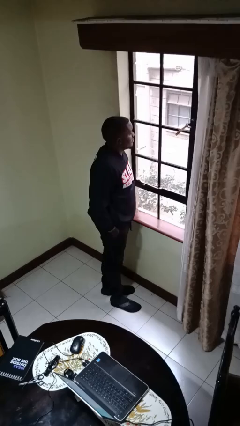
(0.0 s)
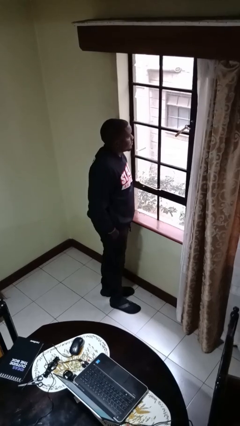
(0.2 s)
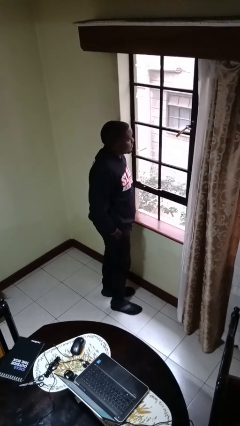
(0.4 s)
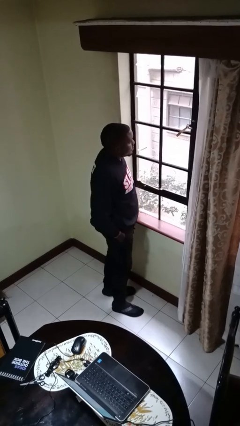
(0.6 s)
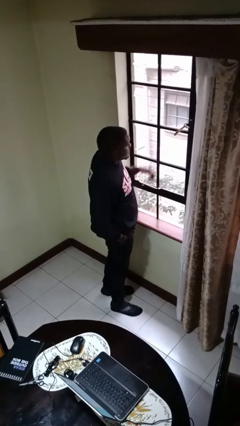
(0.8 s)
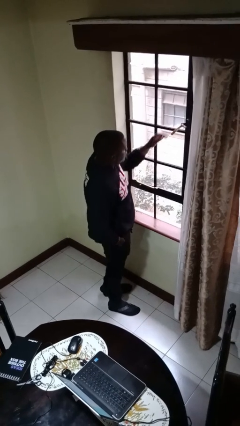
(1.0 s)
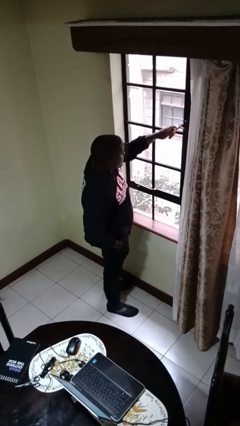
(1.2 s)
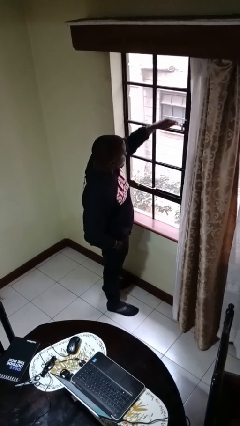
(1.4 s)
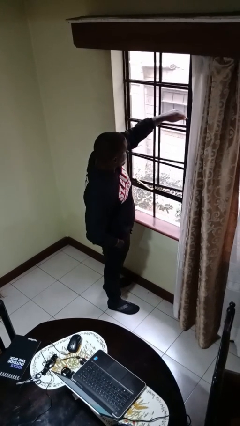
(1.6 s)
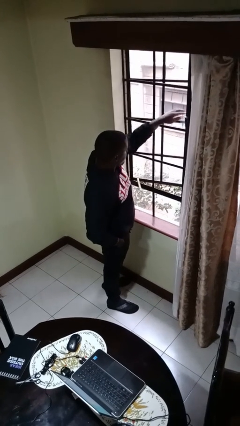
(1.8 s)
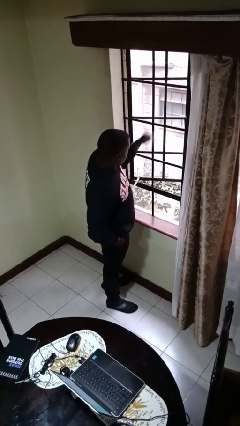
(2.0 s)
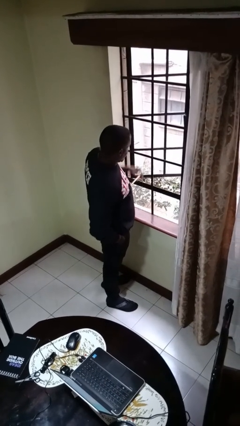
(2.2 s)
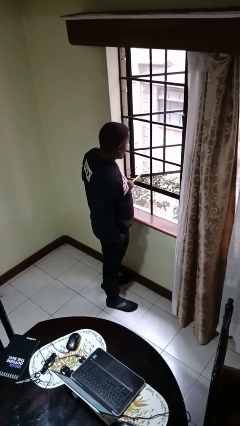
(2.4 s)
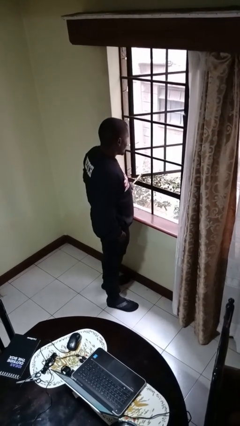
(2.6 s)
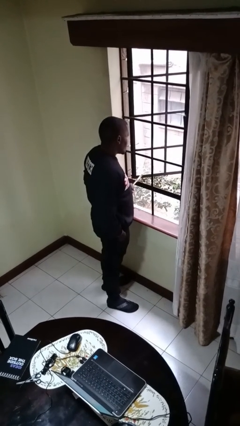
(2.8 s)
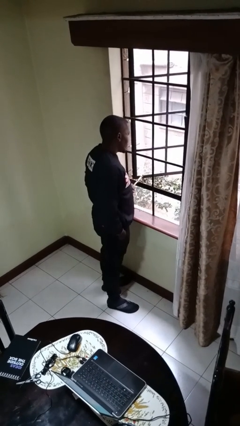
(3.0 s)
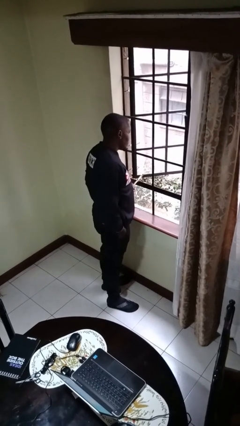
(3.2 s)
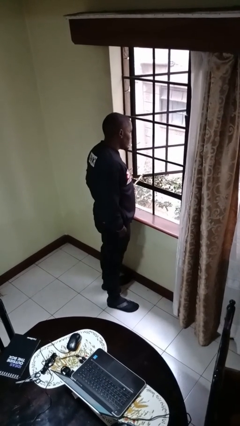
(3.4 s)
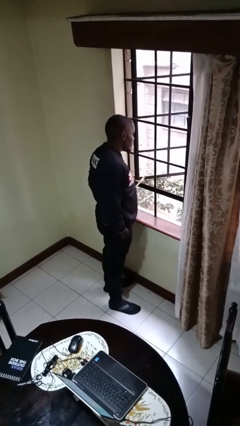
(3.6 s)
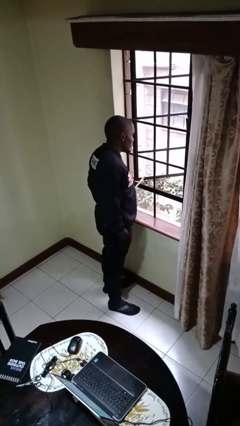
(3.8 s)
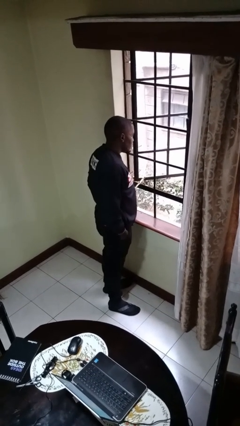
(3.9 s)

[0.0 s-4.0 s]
person opens home window

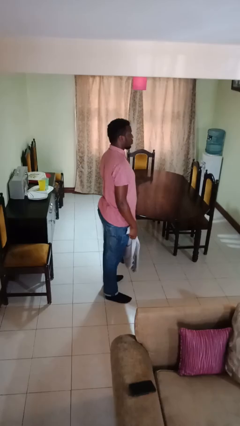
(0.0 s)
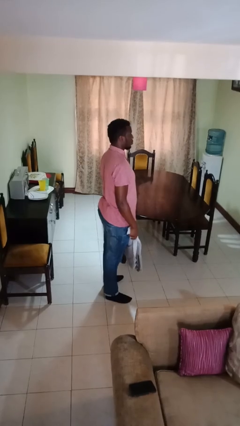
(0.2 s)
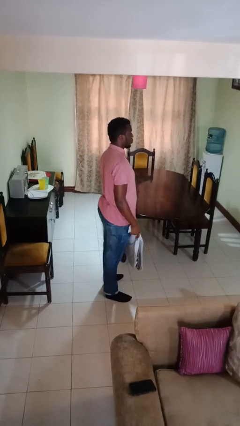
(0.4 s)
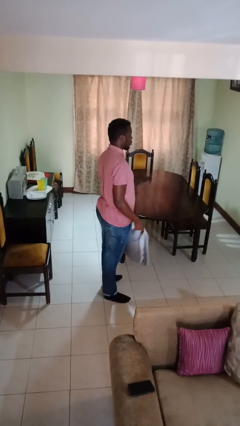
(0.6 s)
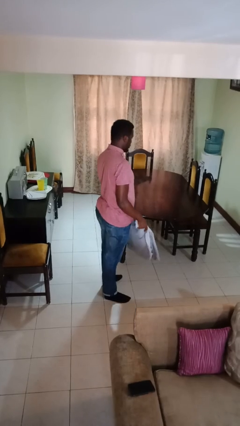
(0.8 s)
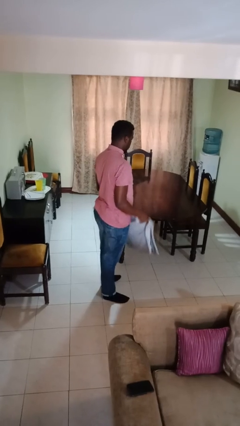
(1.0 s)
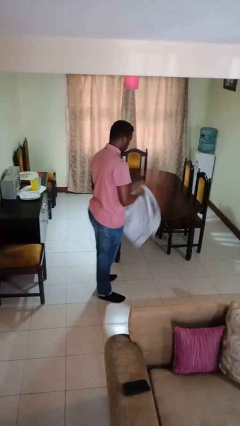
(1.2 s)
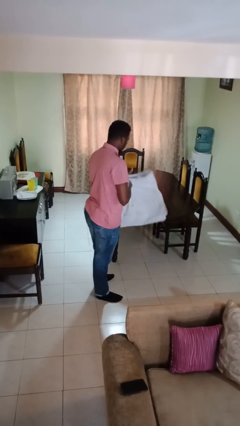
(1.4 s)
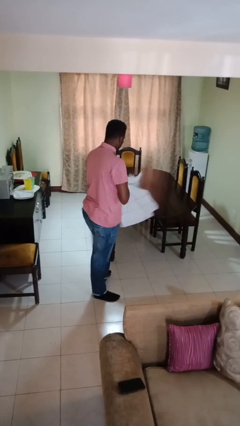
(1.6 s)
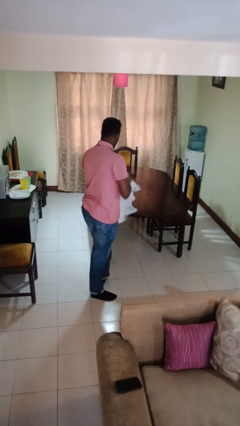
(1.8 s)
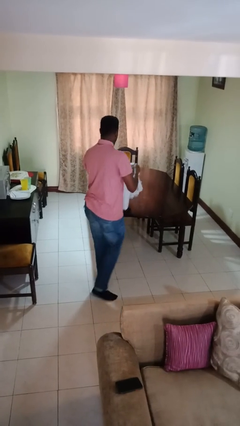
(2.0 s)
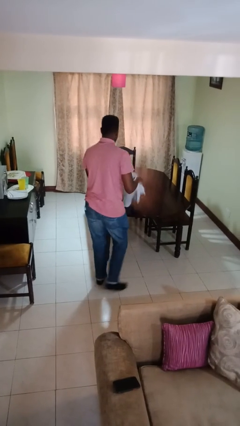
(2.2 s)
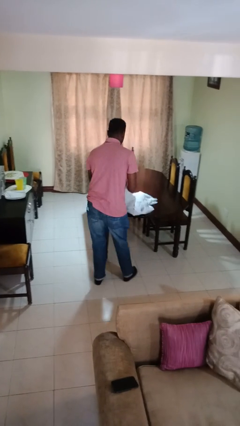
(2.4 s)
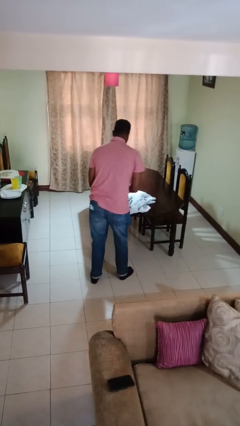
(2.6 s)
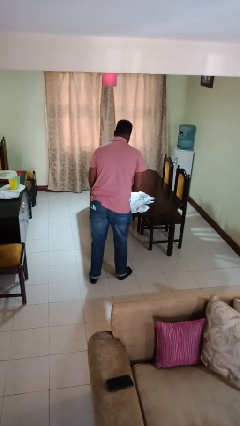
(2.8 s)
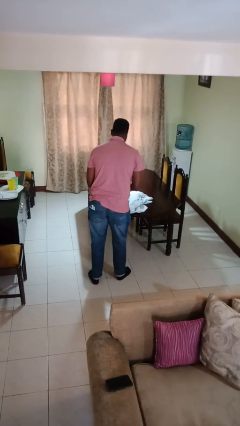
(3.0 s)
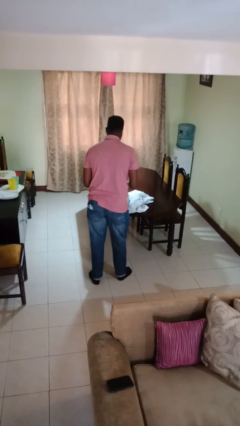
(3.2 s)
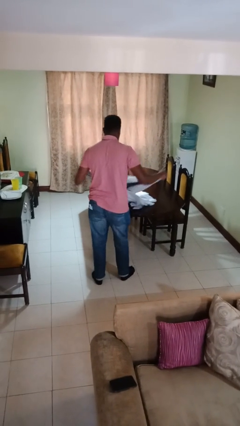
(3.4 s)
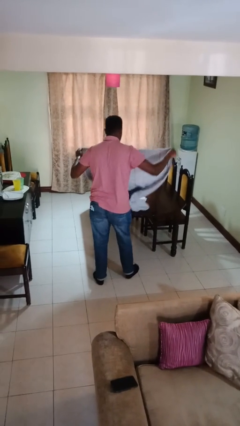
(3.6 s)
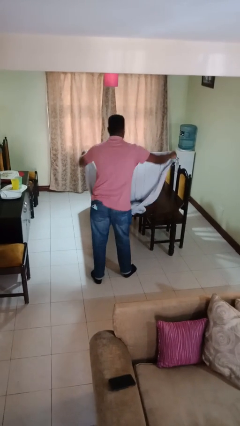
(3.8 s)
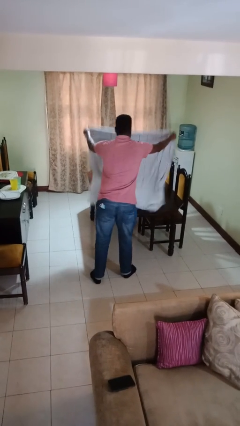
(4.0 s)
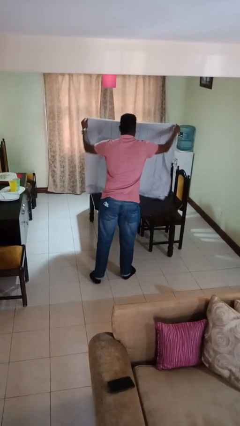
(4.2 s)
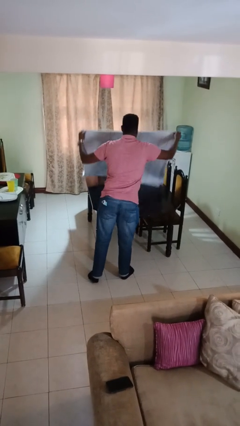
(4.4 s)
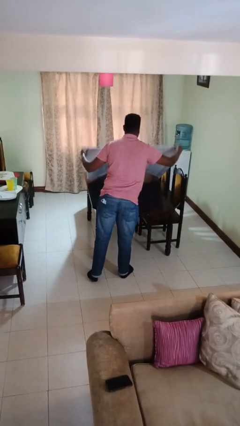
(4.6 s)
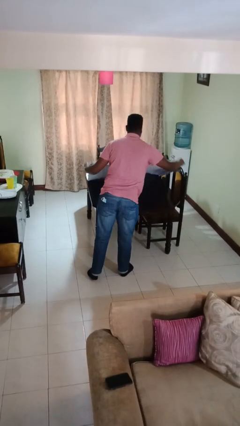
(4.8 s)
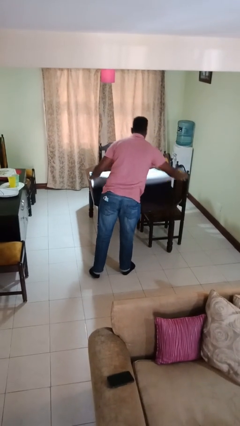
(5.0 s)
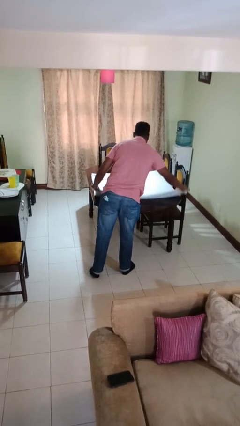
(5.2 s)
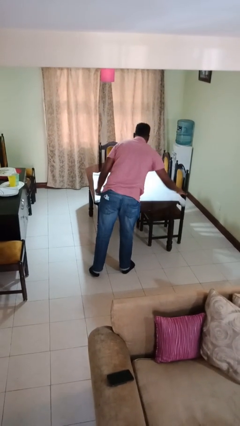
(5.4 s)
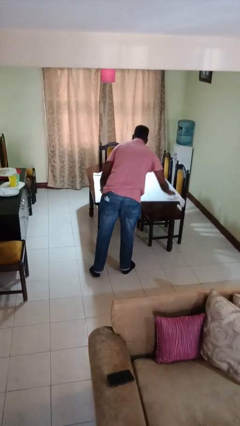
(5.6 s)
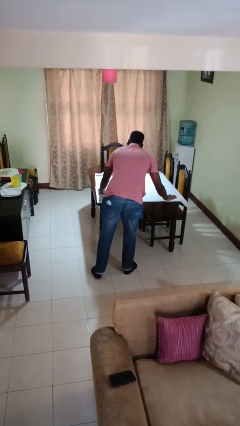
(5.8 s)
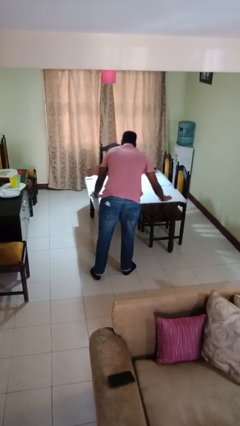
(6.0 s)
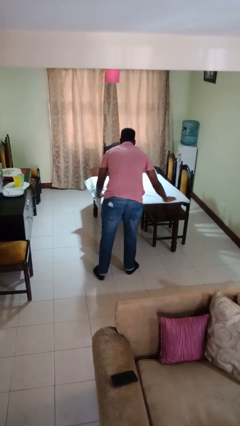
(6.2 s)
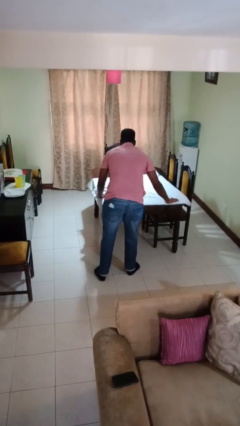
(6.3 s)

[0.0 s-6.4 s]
person spreads tablecloth

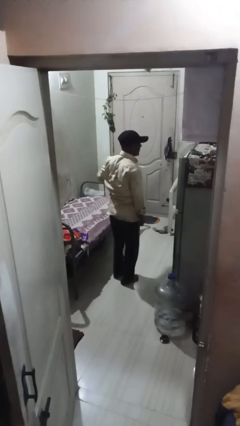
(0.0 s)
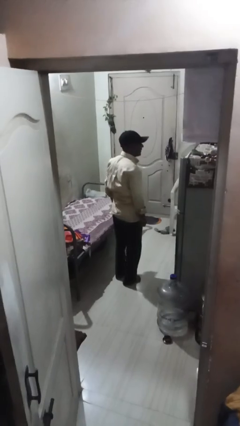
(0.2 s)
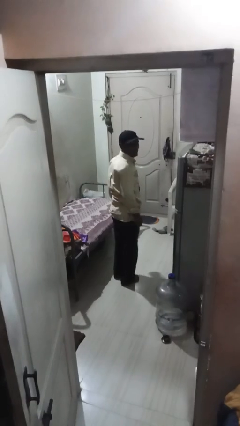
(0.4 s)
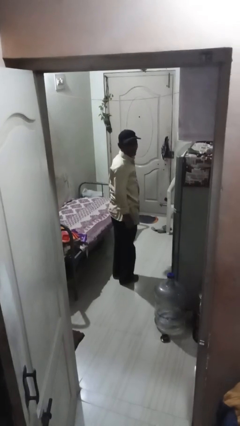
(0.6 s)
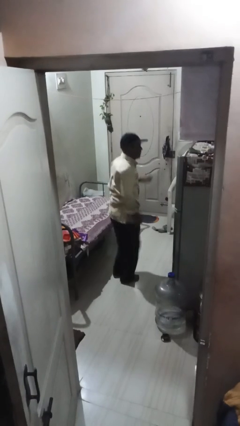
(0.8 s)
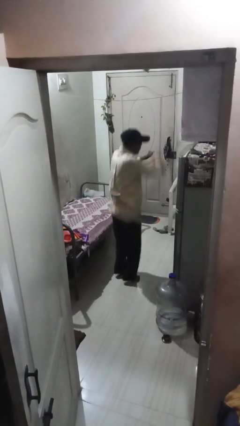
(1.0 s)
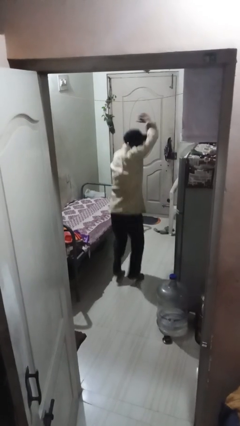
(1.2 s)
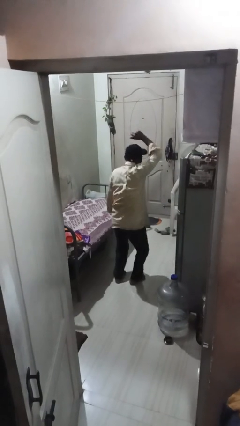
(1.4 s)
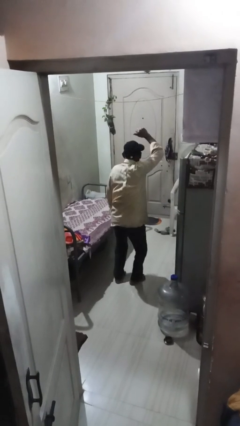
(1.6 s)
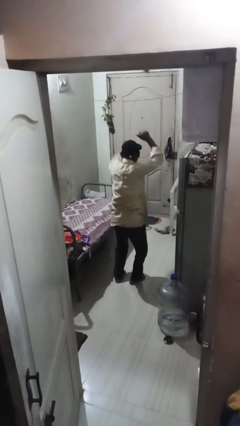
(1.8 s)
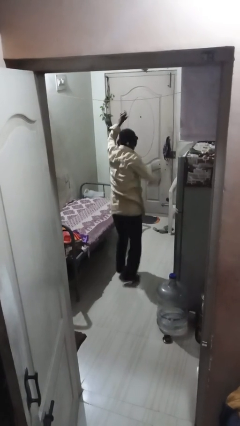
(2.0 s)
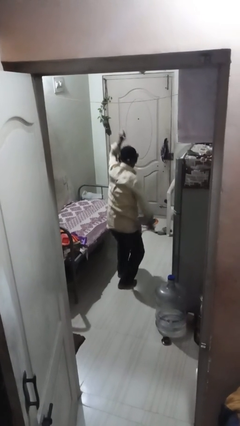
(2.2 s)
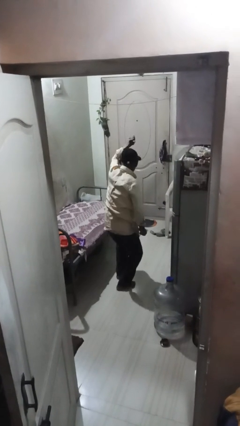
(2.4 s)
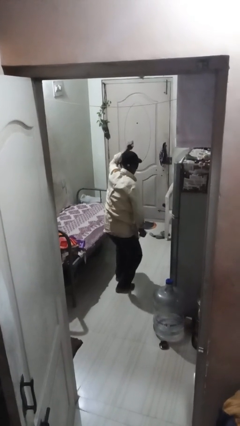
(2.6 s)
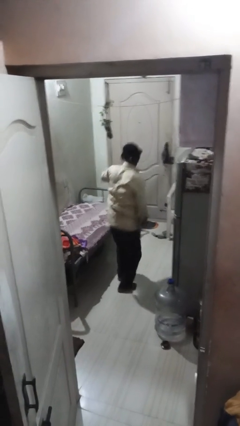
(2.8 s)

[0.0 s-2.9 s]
person dances in place

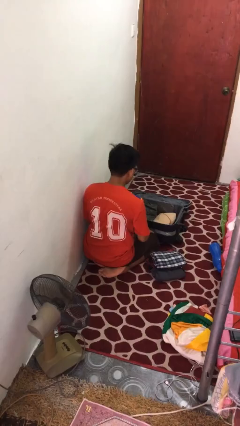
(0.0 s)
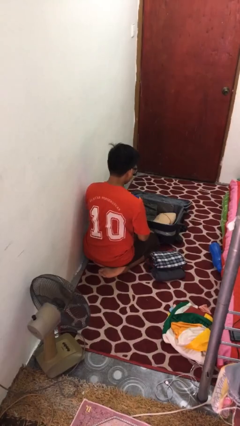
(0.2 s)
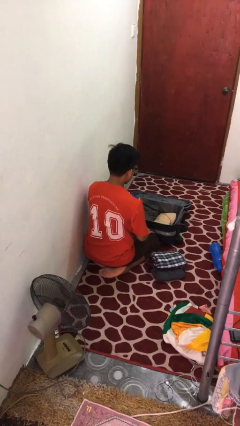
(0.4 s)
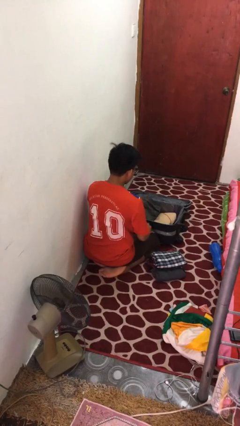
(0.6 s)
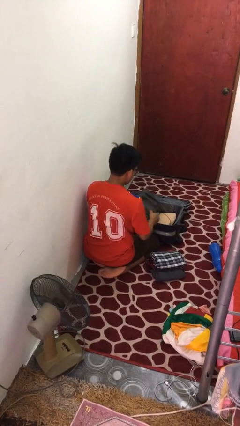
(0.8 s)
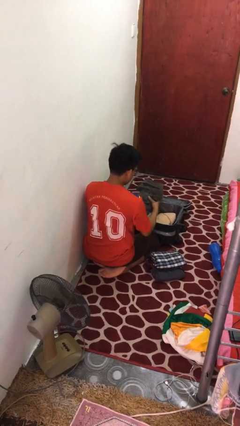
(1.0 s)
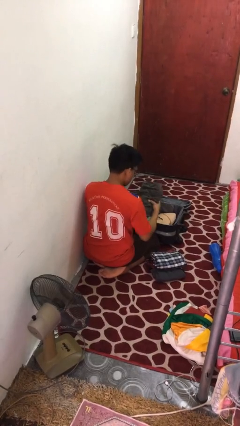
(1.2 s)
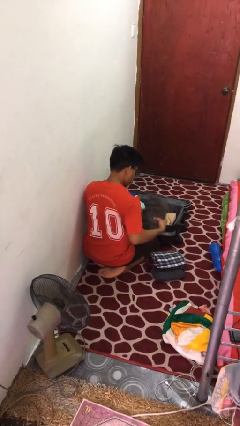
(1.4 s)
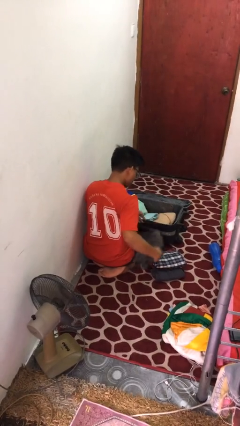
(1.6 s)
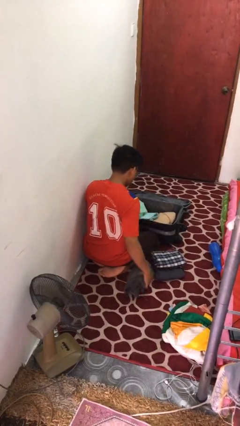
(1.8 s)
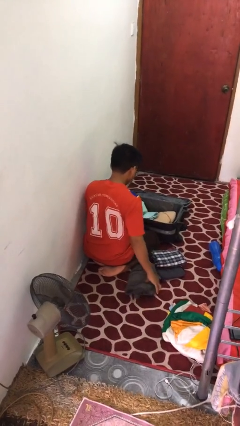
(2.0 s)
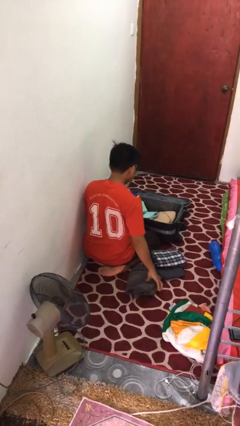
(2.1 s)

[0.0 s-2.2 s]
person unloads clothes from suitcase

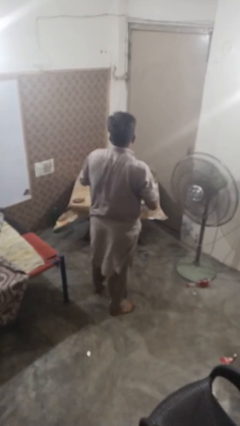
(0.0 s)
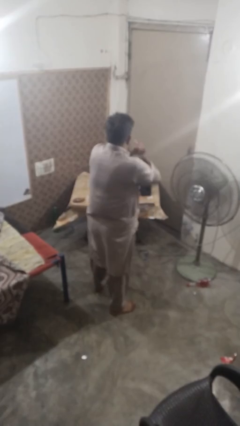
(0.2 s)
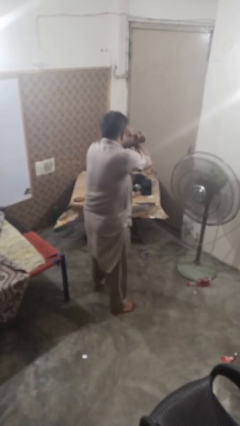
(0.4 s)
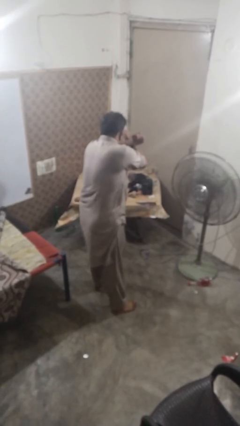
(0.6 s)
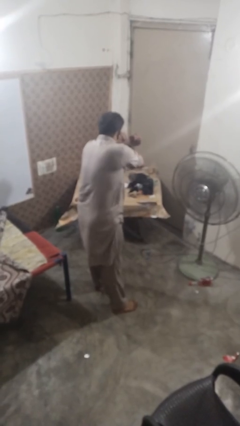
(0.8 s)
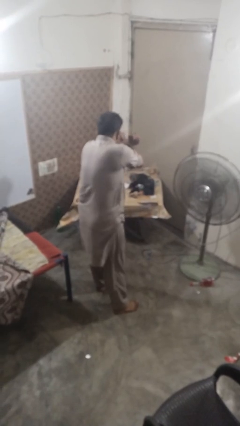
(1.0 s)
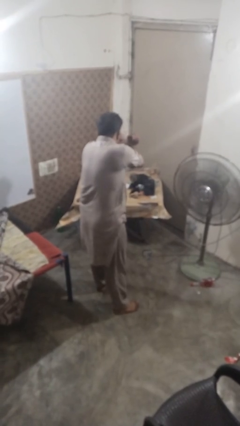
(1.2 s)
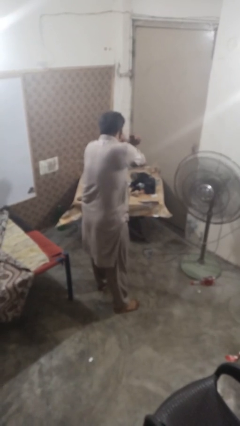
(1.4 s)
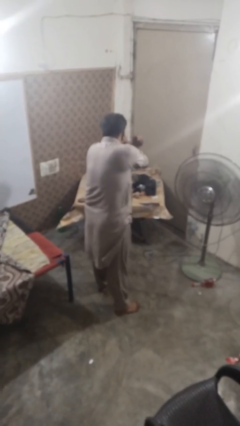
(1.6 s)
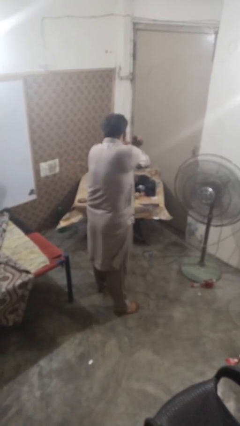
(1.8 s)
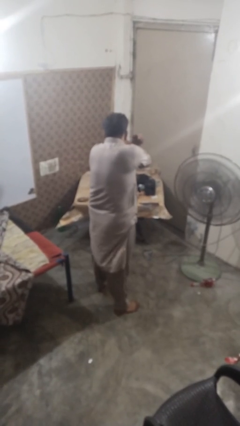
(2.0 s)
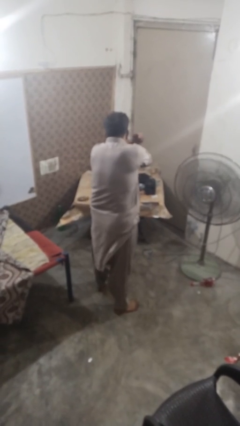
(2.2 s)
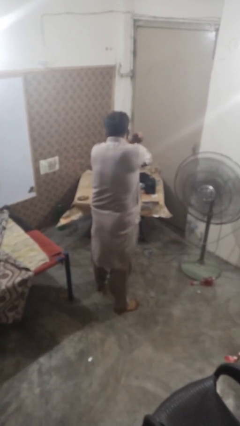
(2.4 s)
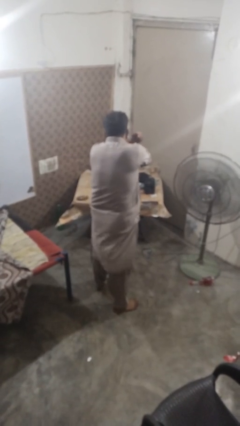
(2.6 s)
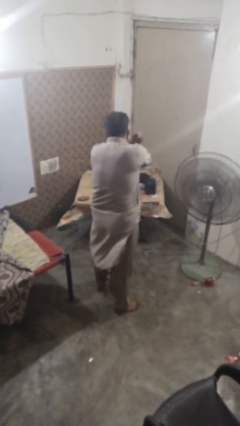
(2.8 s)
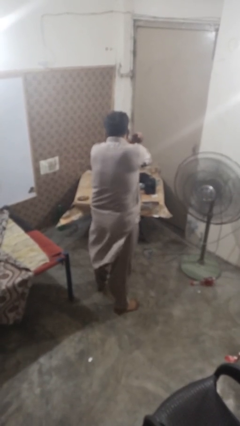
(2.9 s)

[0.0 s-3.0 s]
person karate chop
